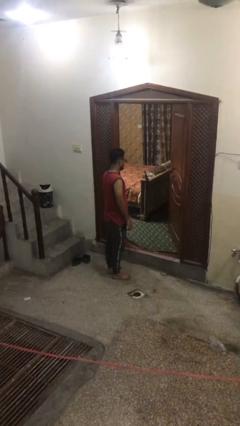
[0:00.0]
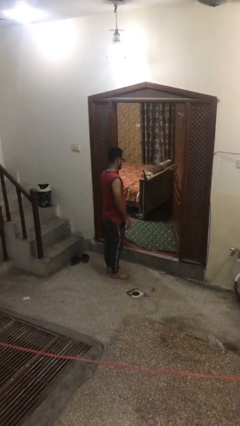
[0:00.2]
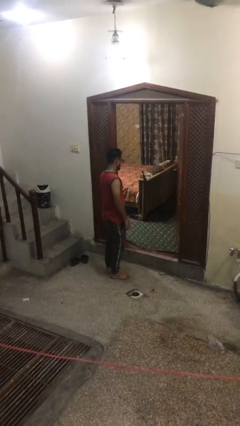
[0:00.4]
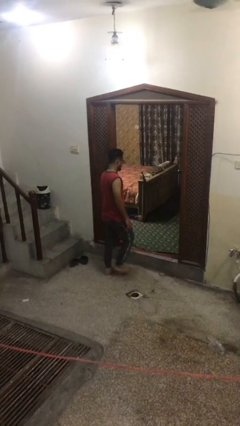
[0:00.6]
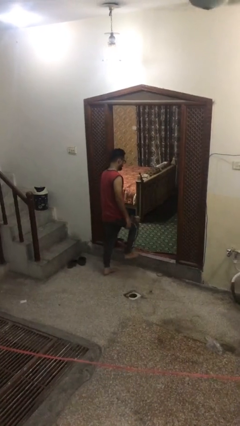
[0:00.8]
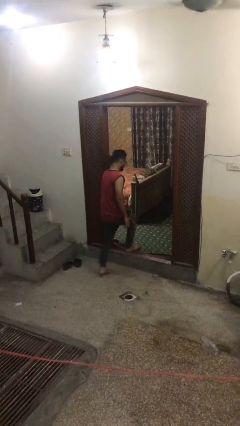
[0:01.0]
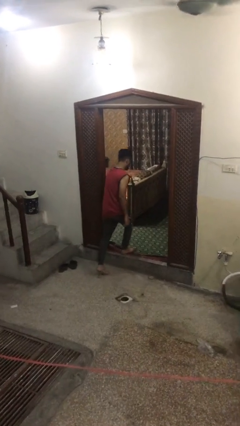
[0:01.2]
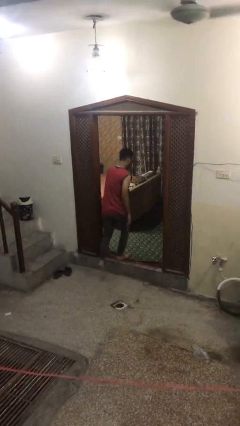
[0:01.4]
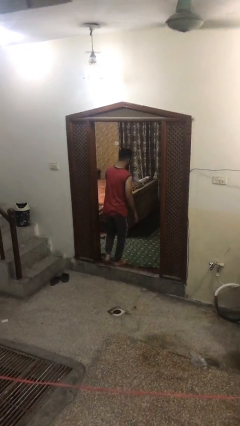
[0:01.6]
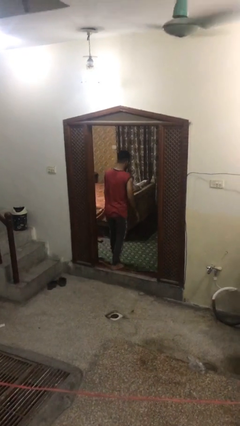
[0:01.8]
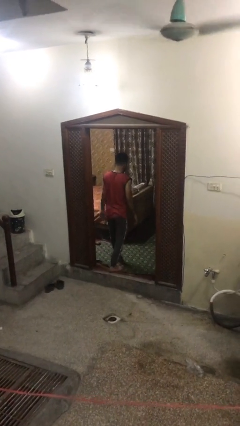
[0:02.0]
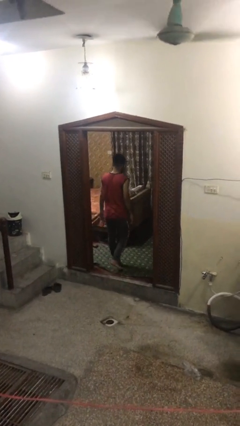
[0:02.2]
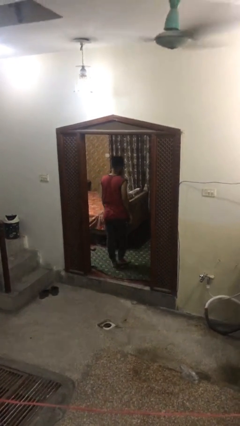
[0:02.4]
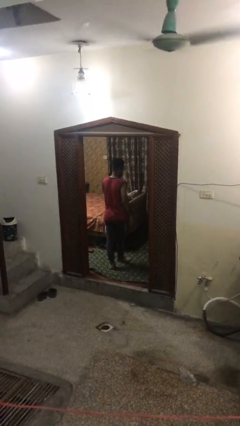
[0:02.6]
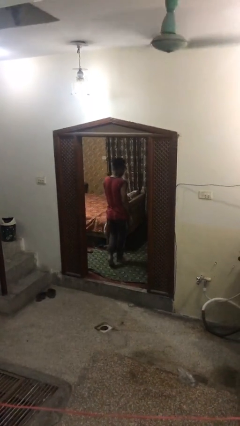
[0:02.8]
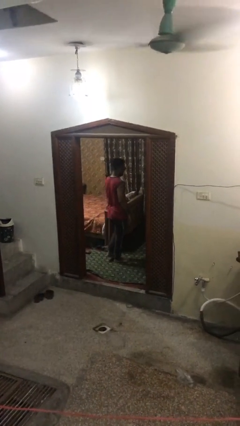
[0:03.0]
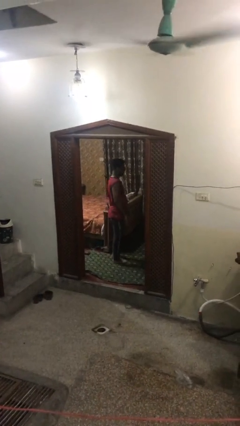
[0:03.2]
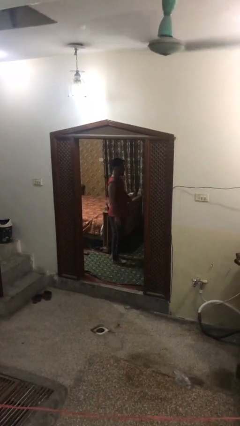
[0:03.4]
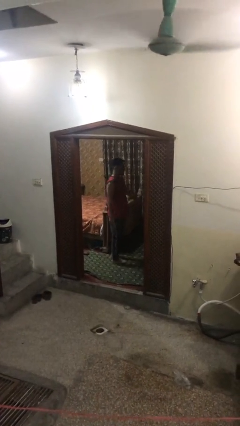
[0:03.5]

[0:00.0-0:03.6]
person exits scene through structure
